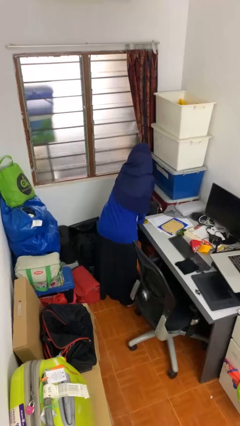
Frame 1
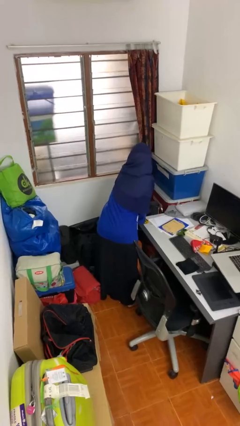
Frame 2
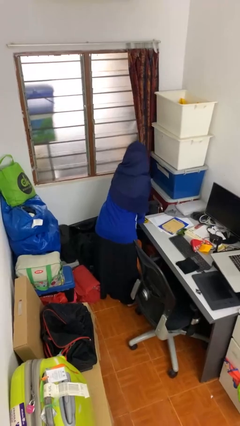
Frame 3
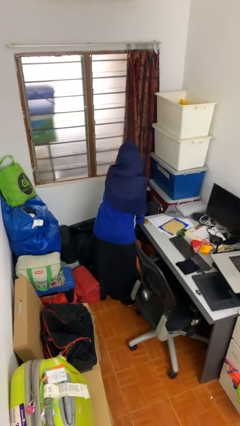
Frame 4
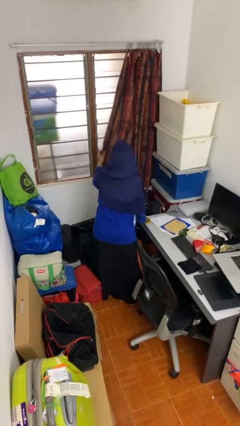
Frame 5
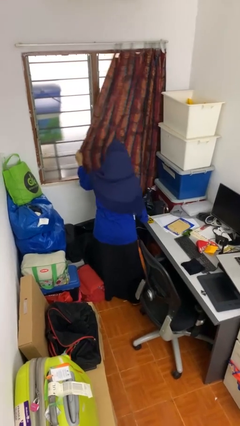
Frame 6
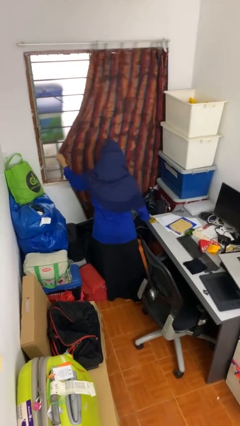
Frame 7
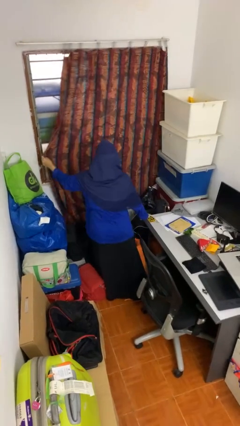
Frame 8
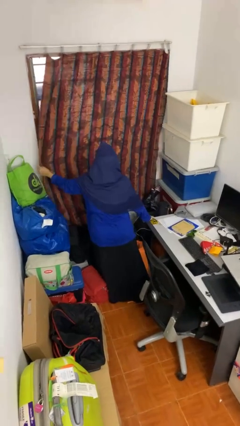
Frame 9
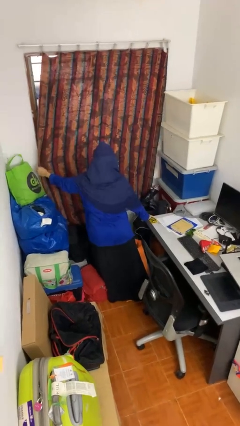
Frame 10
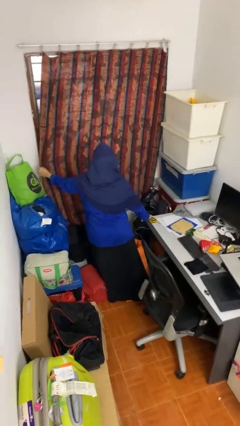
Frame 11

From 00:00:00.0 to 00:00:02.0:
person closes curtains

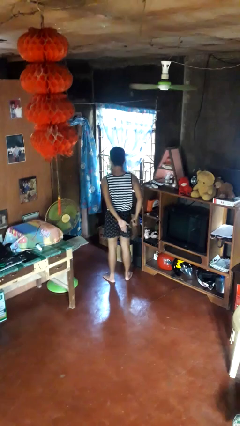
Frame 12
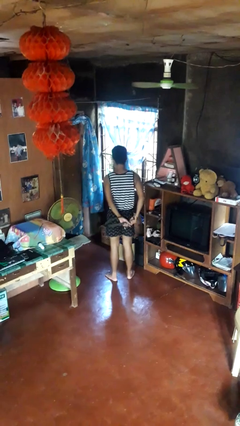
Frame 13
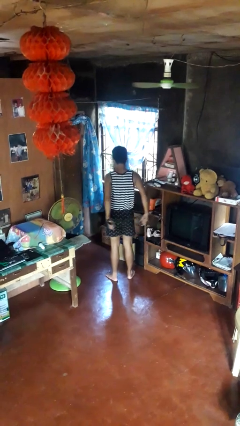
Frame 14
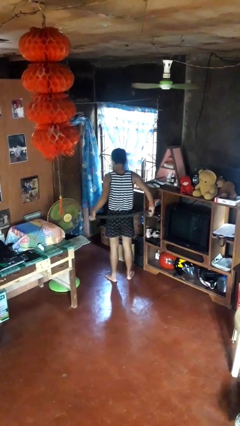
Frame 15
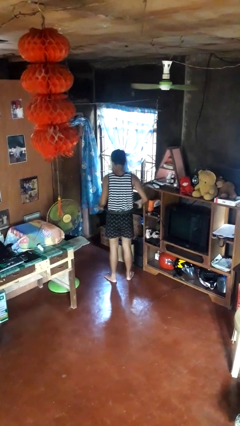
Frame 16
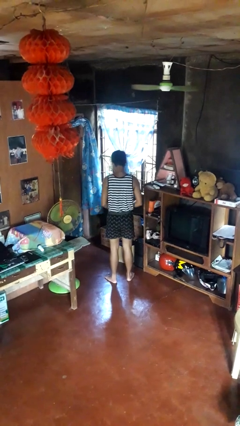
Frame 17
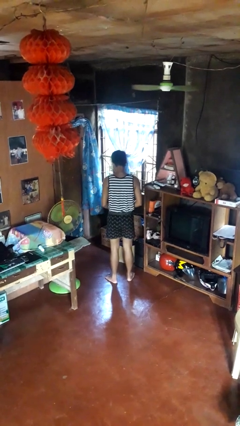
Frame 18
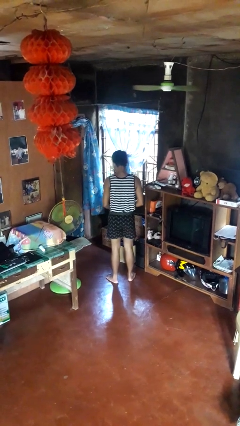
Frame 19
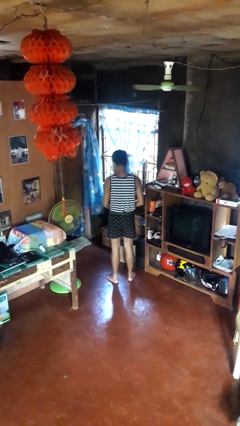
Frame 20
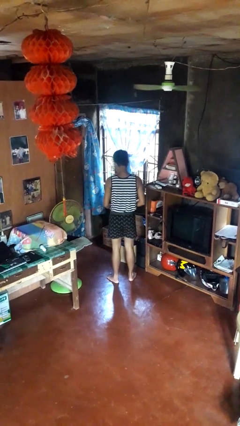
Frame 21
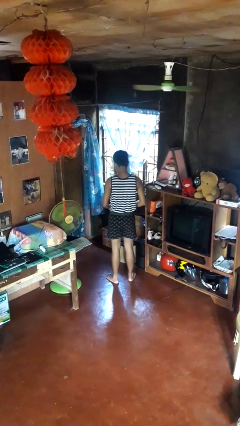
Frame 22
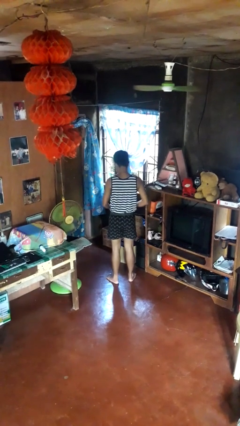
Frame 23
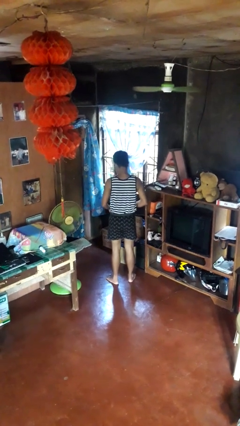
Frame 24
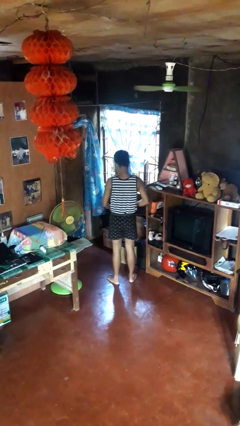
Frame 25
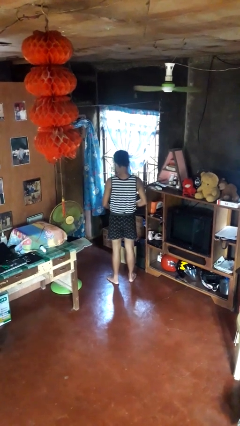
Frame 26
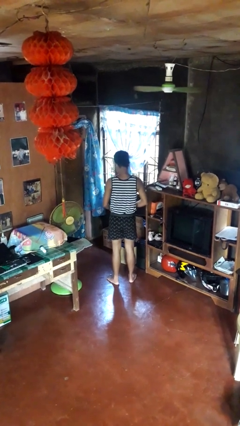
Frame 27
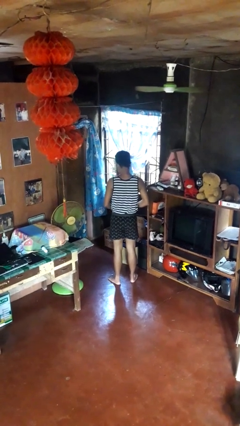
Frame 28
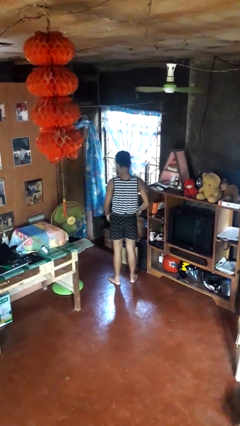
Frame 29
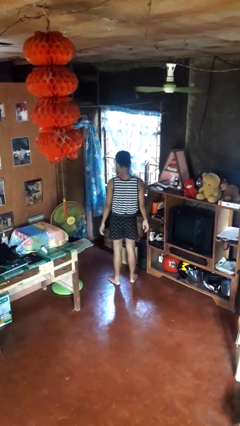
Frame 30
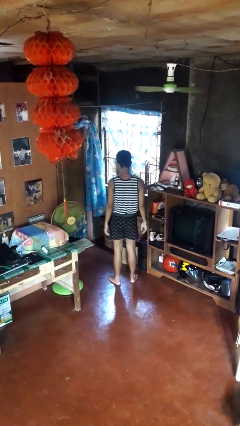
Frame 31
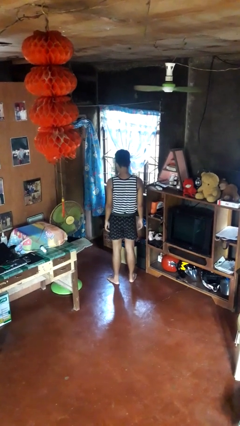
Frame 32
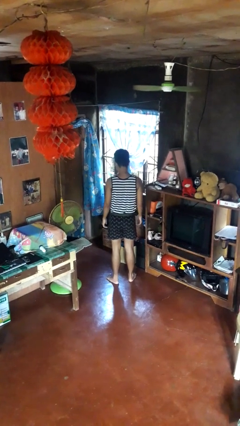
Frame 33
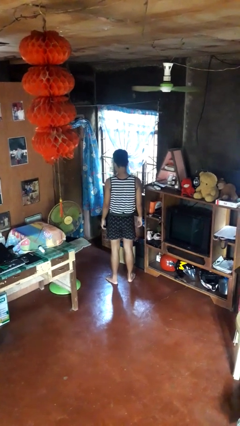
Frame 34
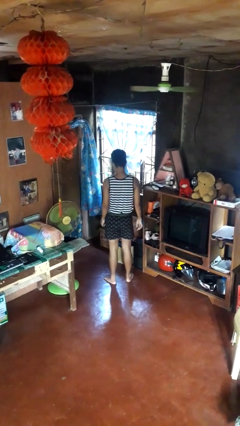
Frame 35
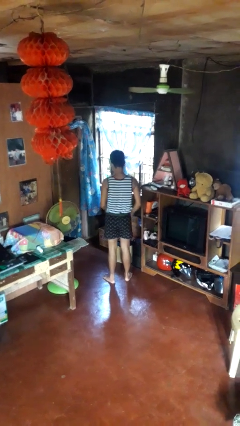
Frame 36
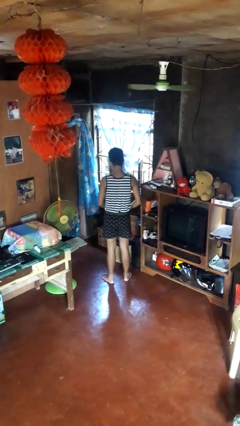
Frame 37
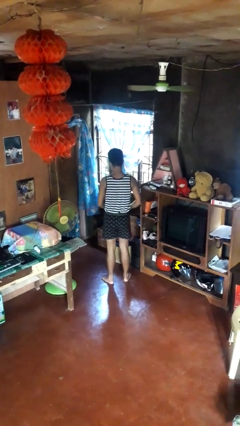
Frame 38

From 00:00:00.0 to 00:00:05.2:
person puts on belt

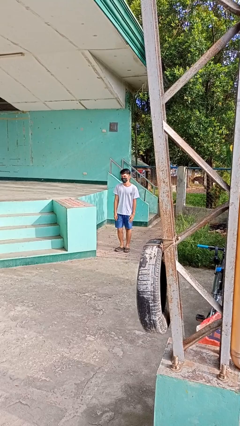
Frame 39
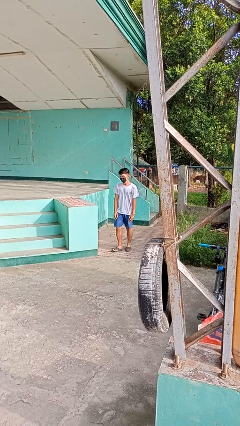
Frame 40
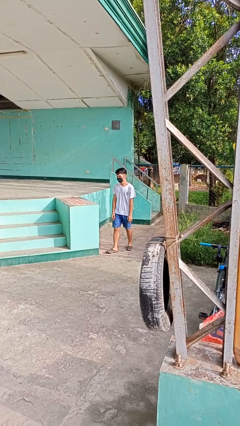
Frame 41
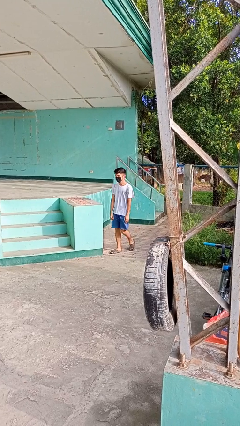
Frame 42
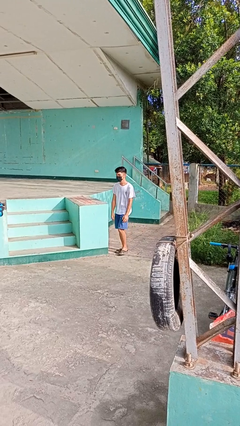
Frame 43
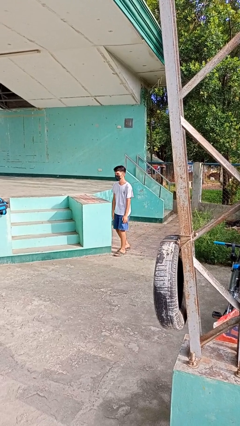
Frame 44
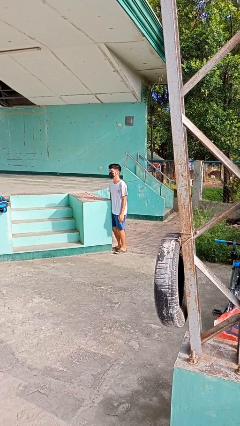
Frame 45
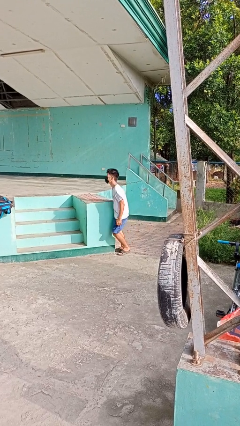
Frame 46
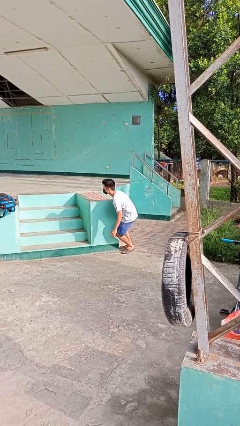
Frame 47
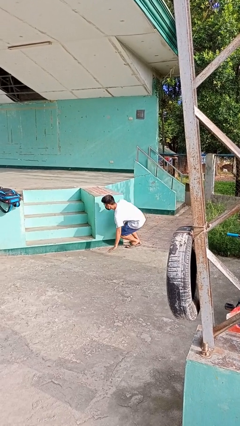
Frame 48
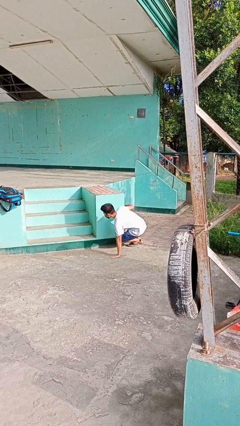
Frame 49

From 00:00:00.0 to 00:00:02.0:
person trips on object on floor

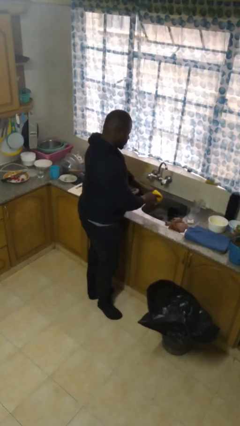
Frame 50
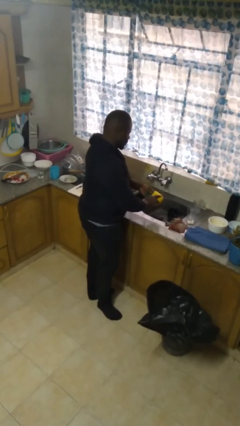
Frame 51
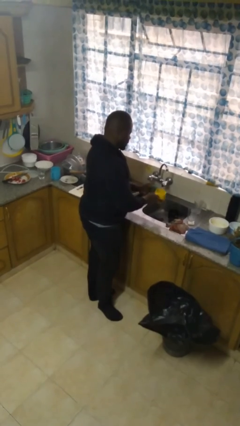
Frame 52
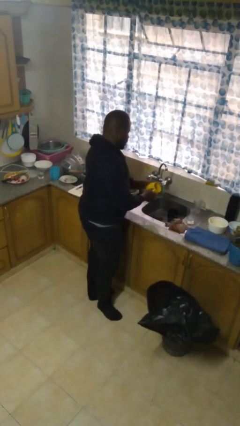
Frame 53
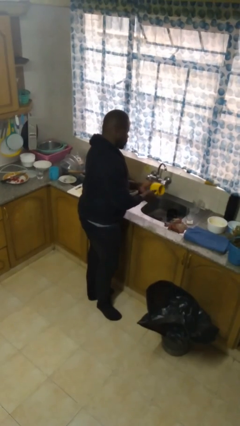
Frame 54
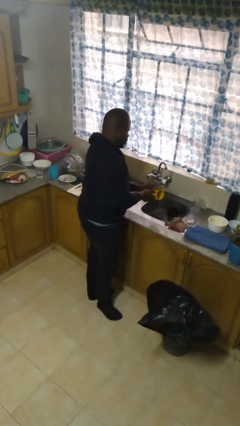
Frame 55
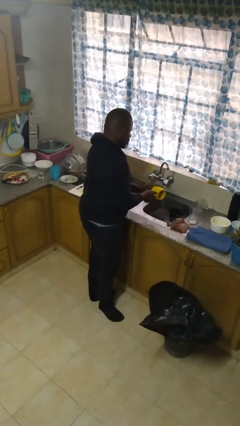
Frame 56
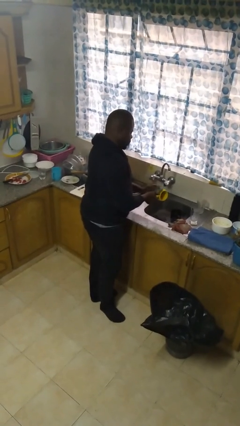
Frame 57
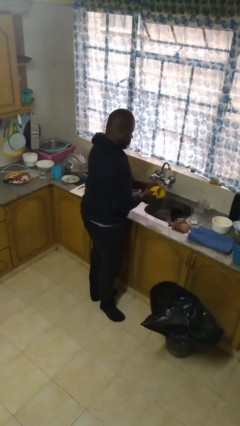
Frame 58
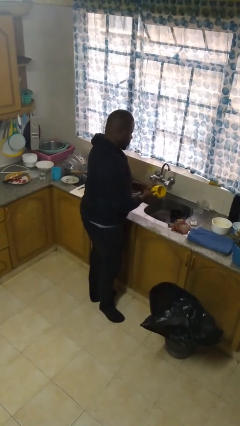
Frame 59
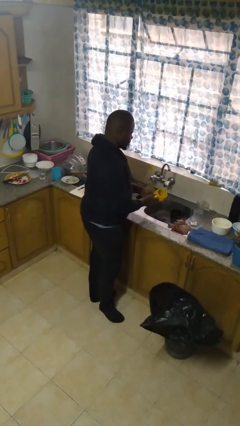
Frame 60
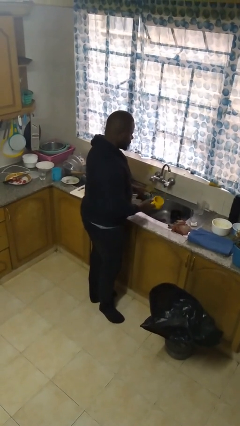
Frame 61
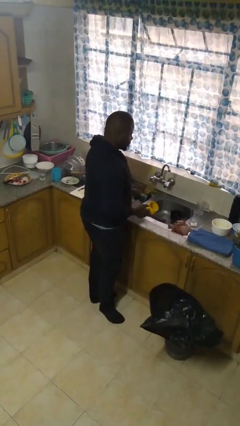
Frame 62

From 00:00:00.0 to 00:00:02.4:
person washes dish

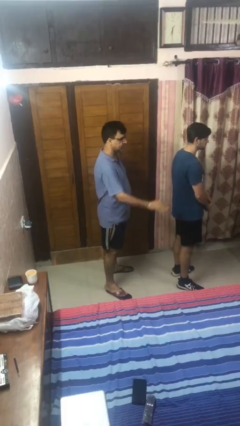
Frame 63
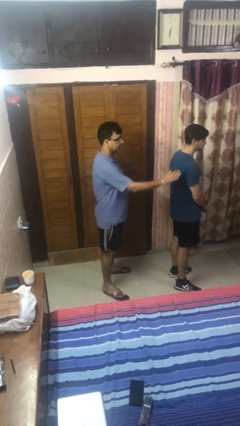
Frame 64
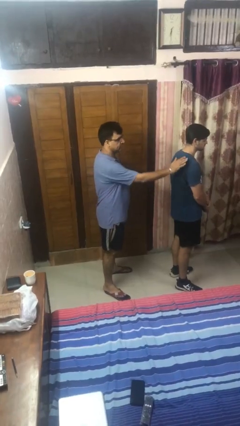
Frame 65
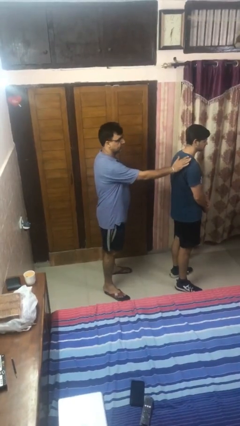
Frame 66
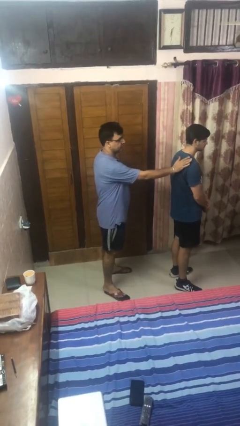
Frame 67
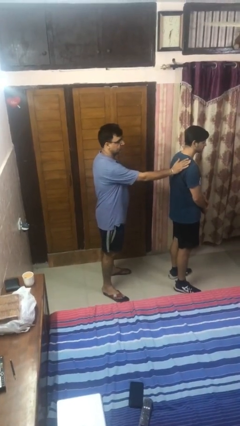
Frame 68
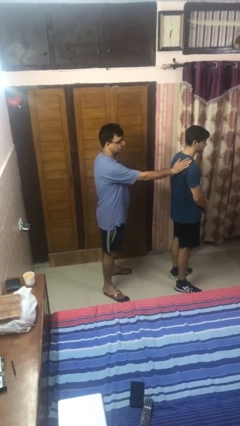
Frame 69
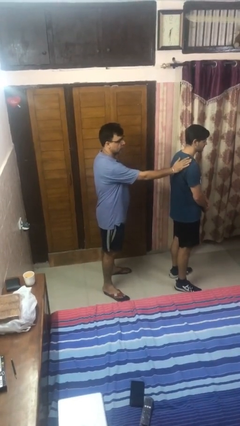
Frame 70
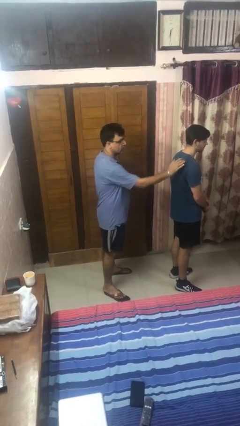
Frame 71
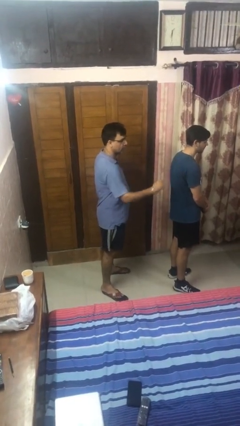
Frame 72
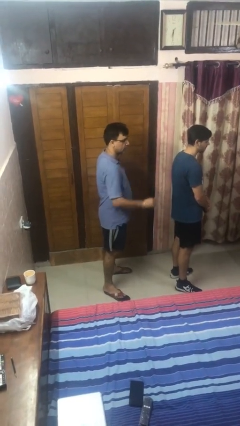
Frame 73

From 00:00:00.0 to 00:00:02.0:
person touches back of person

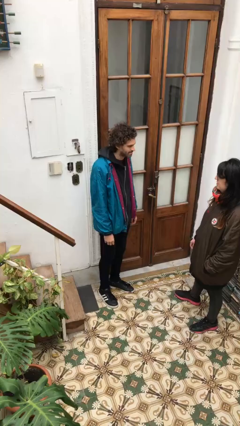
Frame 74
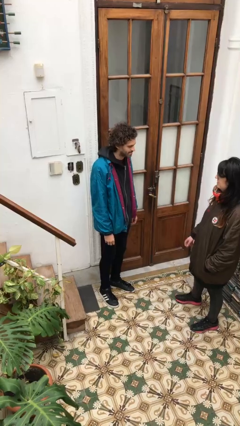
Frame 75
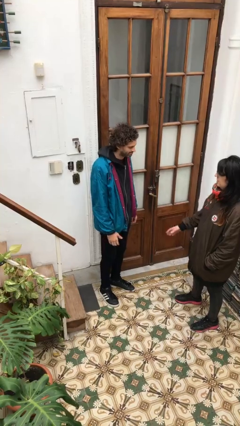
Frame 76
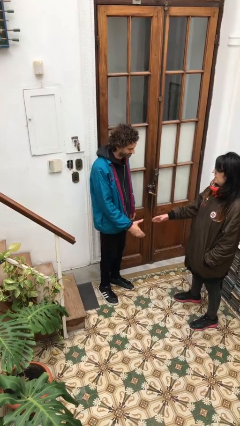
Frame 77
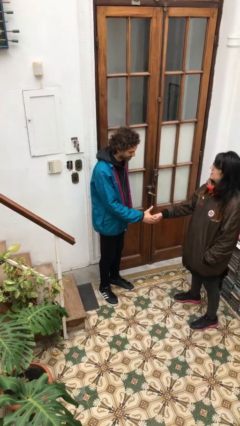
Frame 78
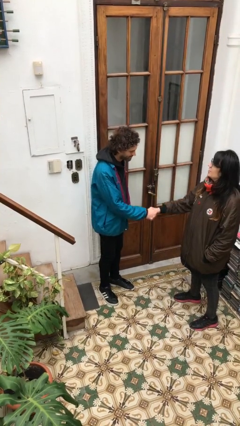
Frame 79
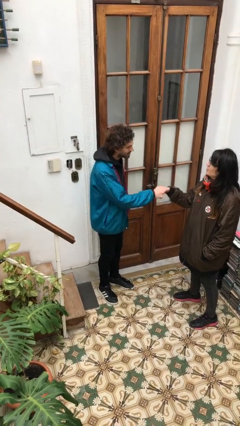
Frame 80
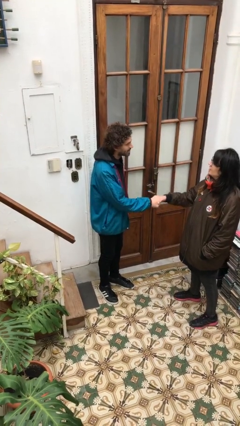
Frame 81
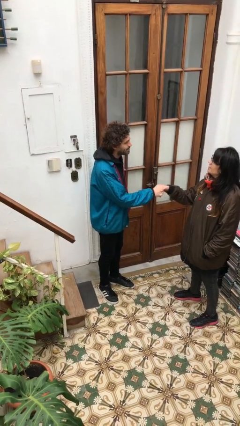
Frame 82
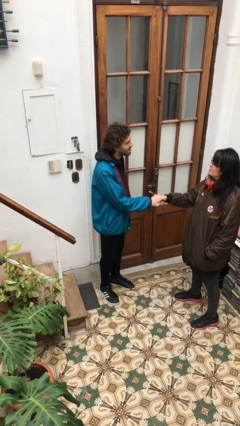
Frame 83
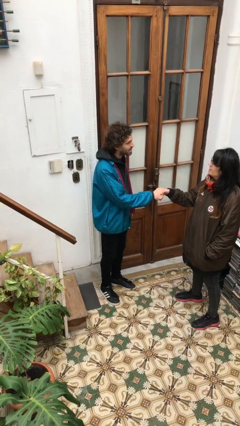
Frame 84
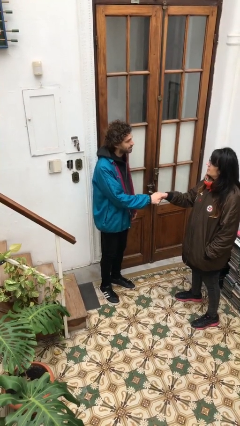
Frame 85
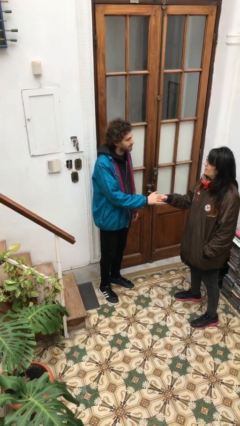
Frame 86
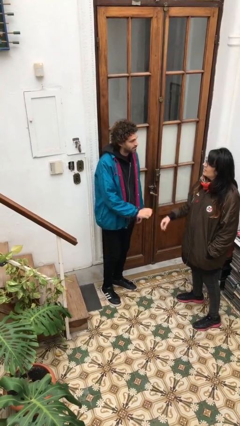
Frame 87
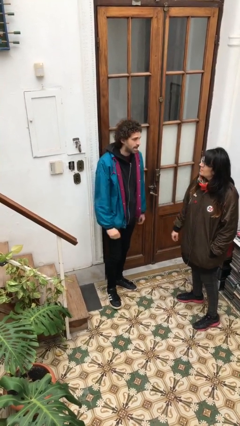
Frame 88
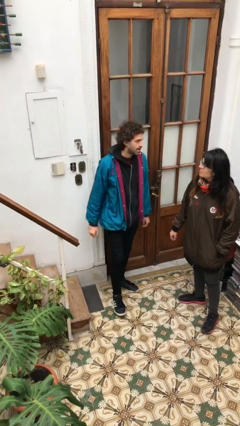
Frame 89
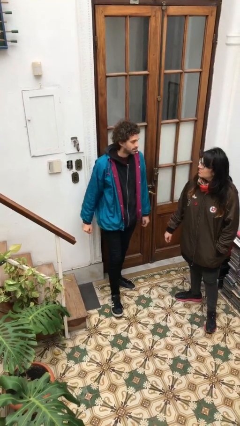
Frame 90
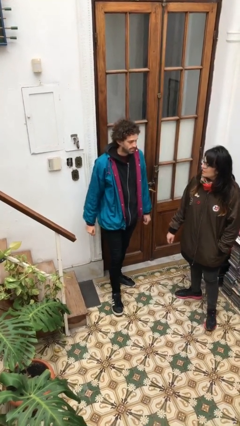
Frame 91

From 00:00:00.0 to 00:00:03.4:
person shakes hand

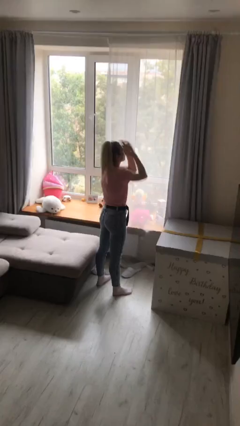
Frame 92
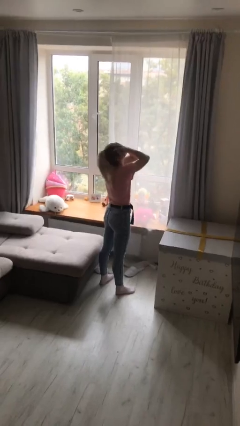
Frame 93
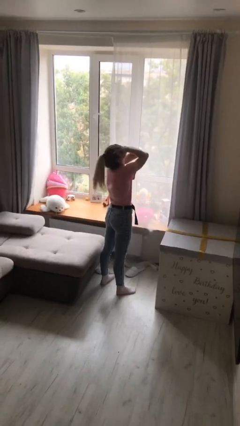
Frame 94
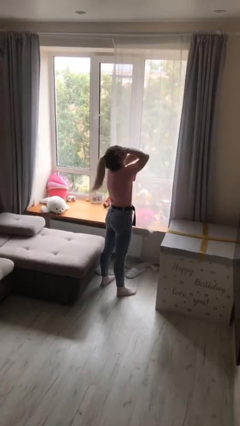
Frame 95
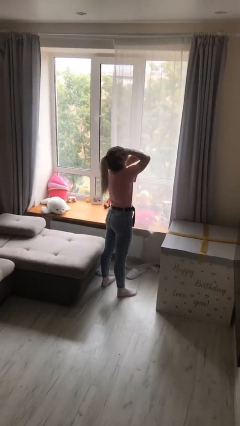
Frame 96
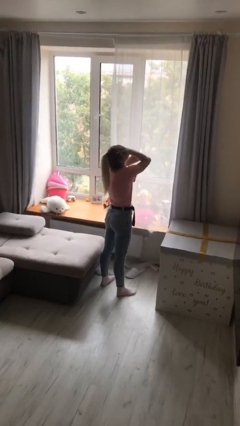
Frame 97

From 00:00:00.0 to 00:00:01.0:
person covers face with hands
